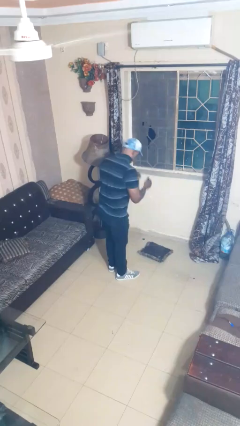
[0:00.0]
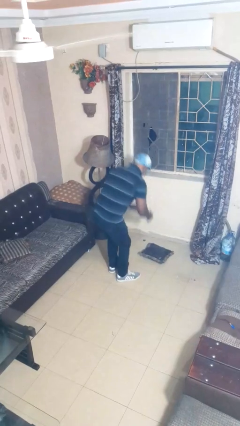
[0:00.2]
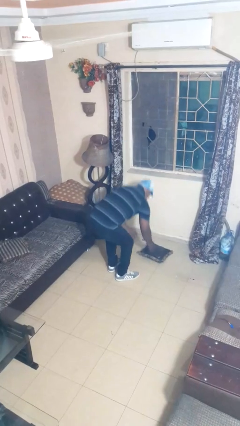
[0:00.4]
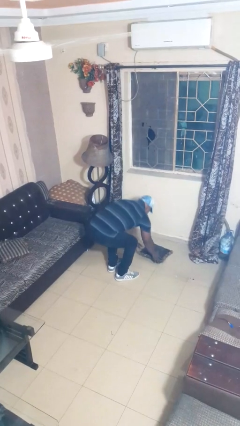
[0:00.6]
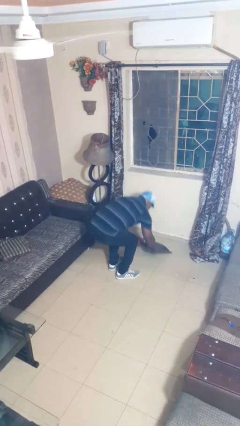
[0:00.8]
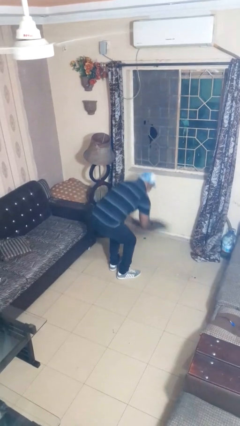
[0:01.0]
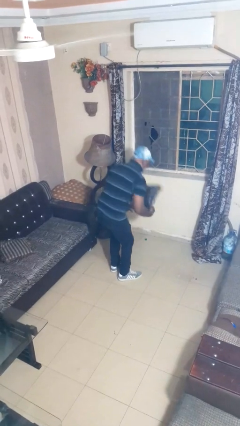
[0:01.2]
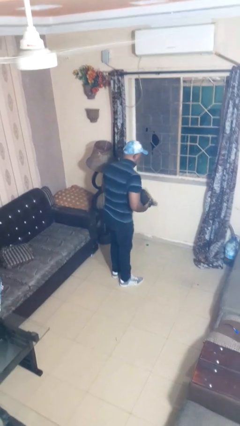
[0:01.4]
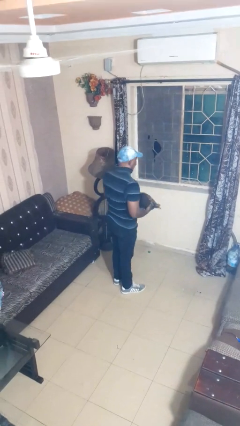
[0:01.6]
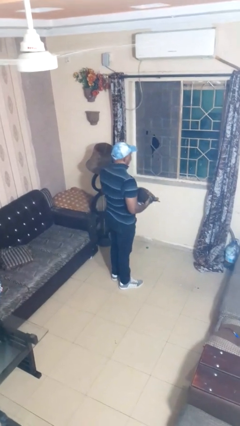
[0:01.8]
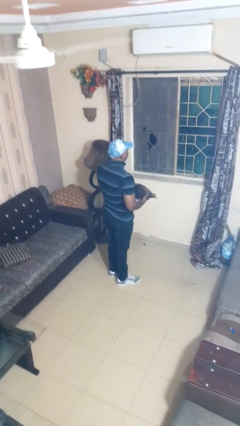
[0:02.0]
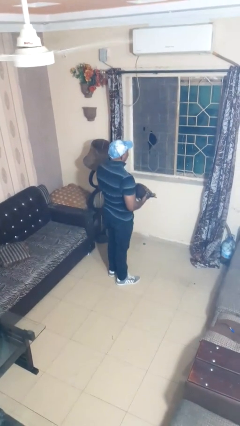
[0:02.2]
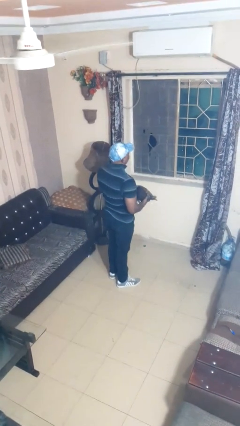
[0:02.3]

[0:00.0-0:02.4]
person picks up object from floor

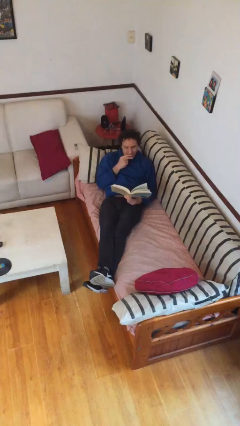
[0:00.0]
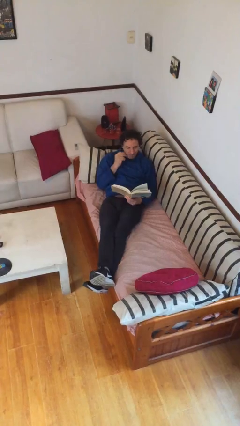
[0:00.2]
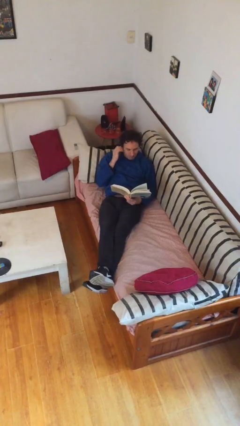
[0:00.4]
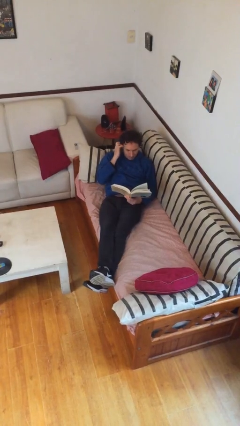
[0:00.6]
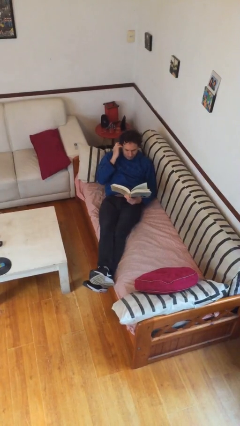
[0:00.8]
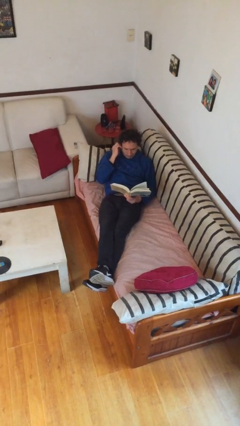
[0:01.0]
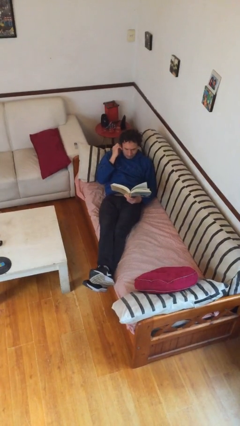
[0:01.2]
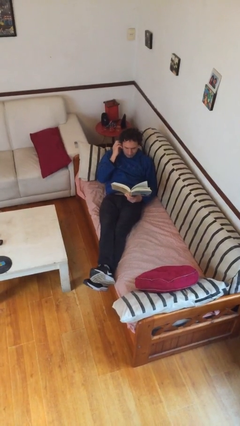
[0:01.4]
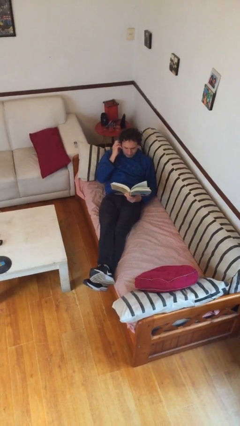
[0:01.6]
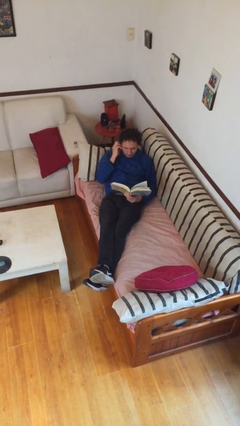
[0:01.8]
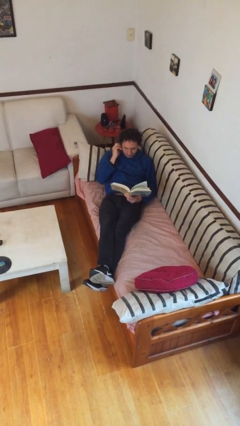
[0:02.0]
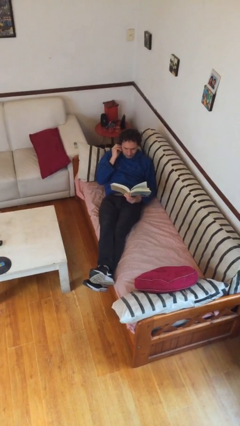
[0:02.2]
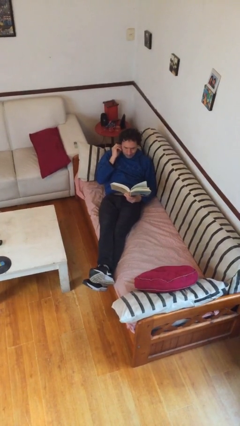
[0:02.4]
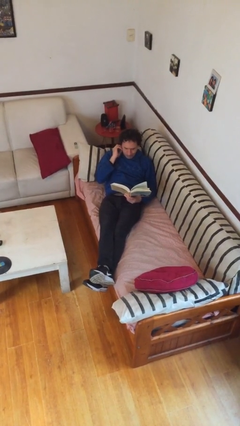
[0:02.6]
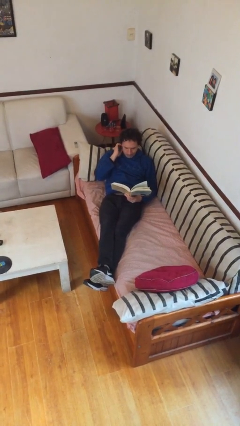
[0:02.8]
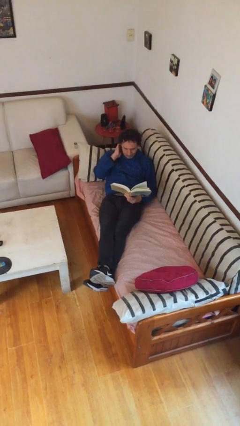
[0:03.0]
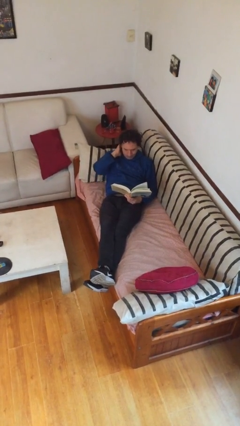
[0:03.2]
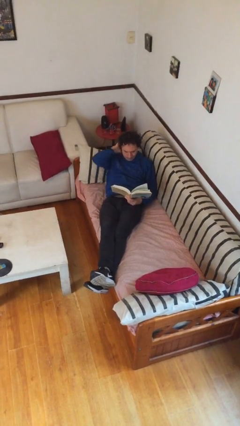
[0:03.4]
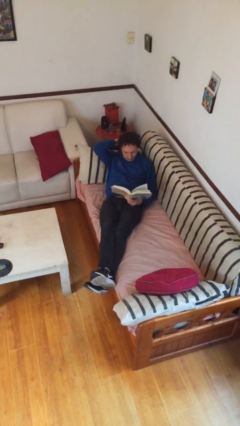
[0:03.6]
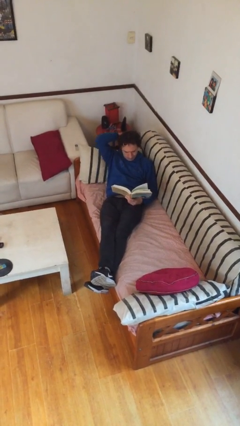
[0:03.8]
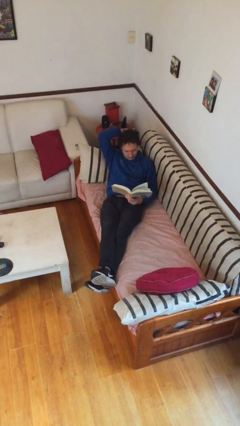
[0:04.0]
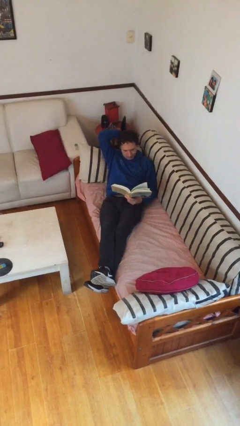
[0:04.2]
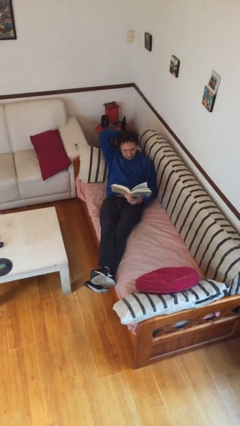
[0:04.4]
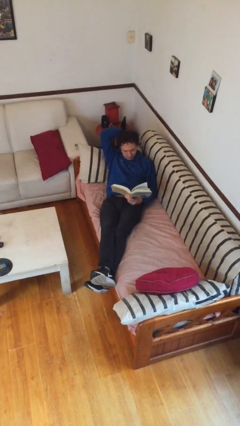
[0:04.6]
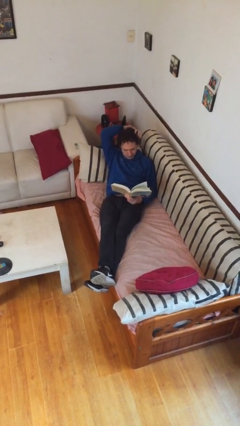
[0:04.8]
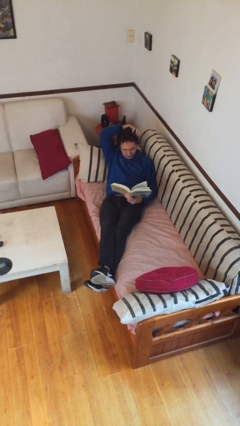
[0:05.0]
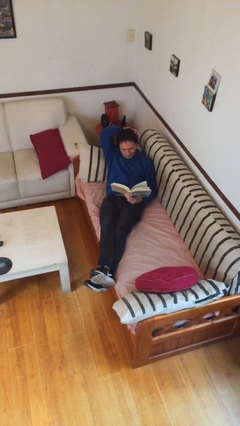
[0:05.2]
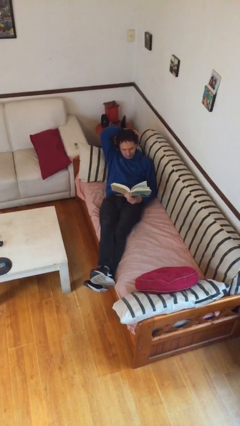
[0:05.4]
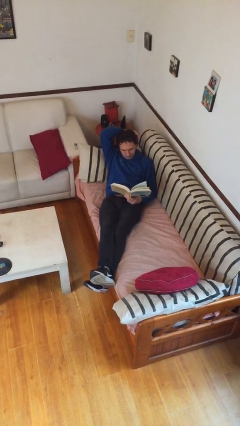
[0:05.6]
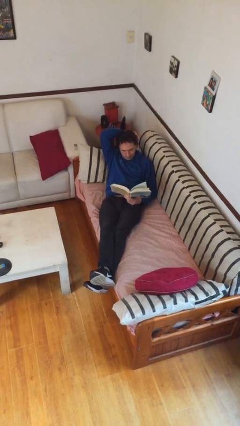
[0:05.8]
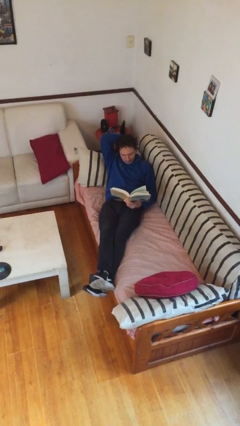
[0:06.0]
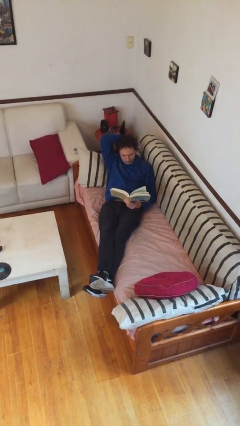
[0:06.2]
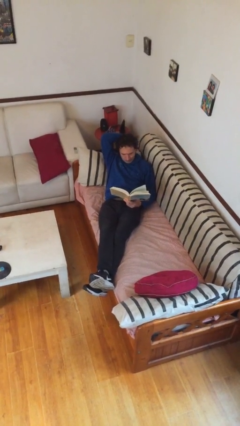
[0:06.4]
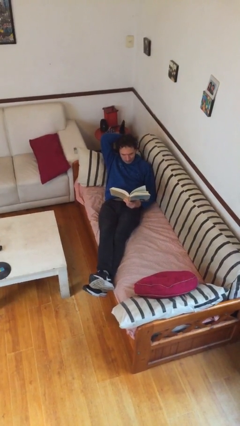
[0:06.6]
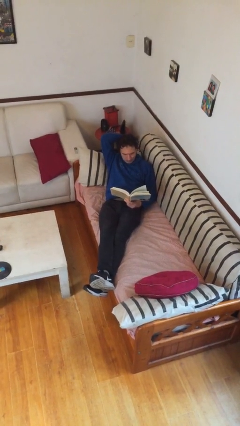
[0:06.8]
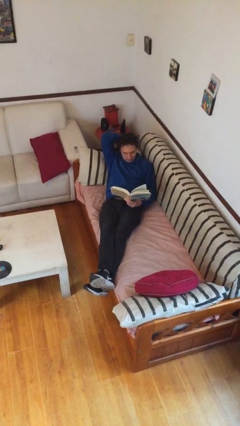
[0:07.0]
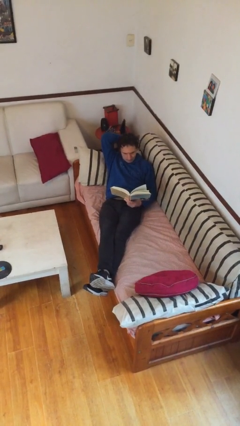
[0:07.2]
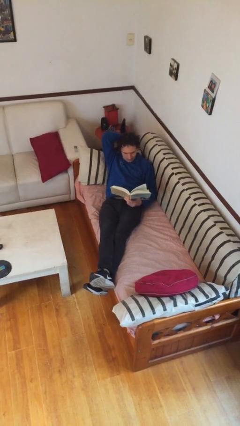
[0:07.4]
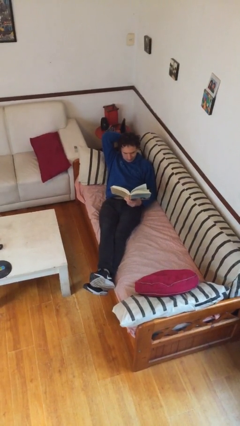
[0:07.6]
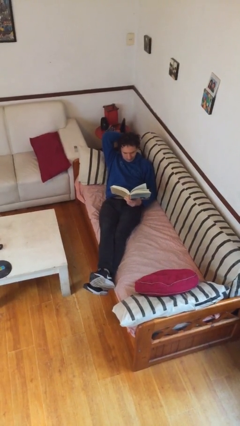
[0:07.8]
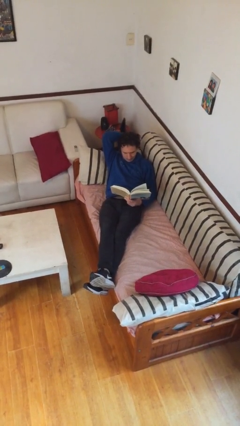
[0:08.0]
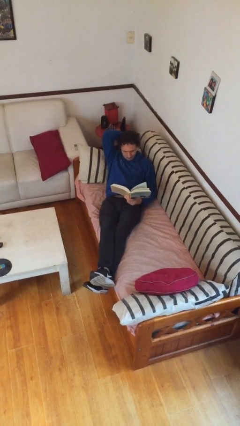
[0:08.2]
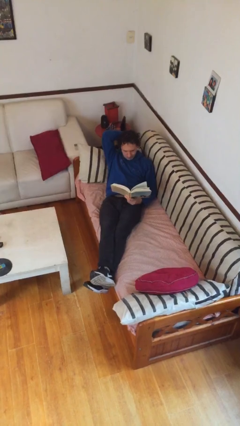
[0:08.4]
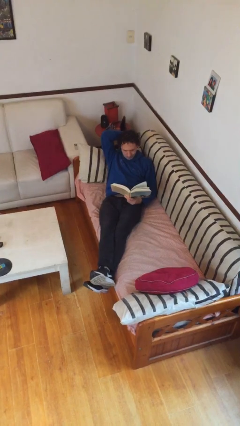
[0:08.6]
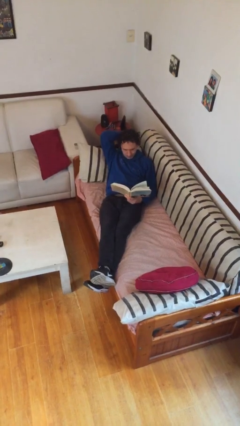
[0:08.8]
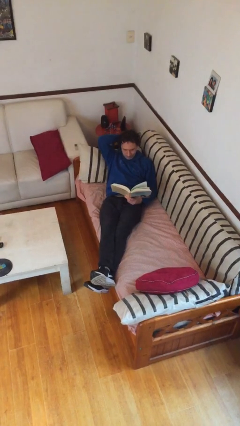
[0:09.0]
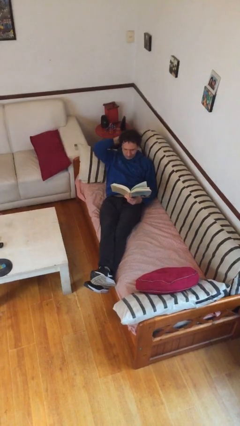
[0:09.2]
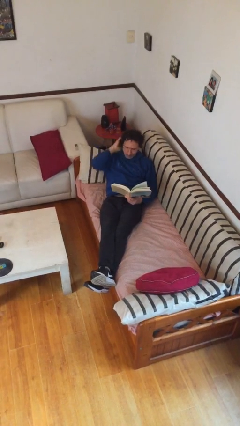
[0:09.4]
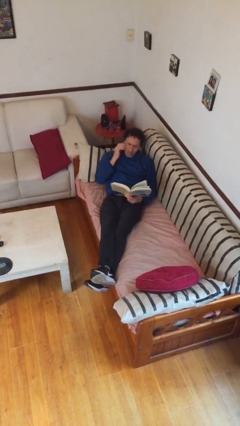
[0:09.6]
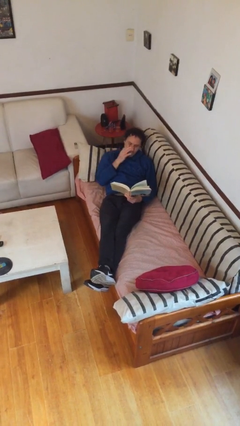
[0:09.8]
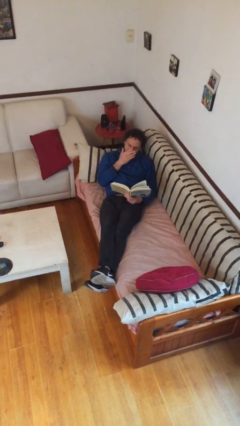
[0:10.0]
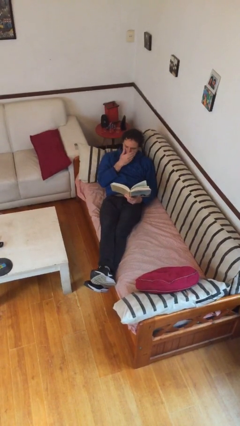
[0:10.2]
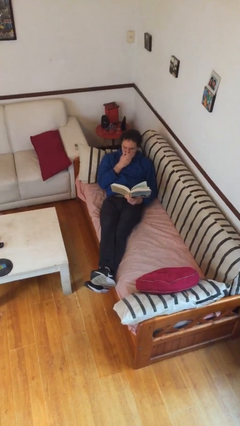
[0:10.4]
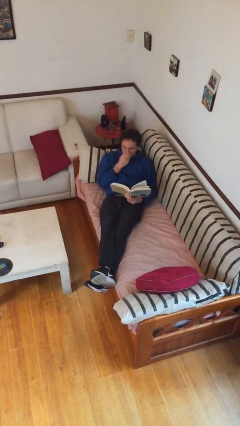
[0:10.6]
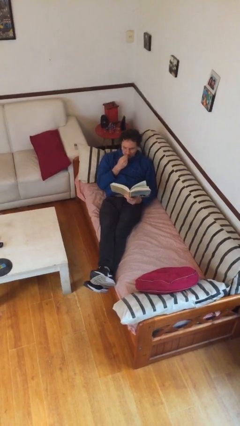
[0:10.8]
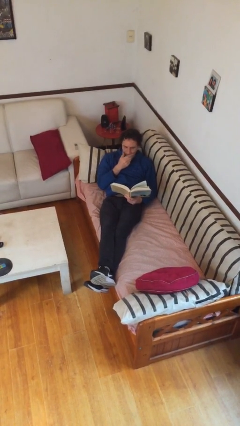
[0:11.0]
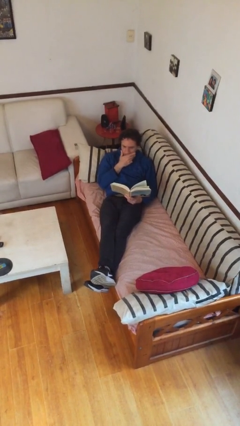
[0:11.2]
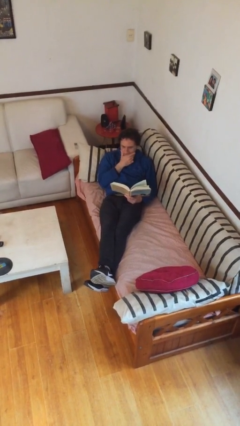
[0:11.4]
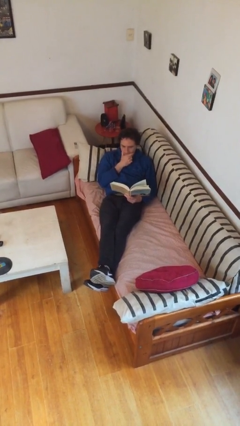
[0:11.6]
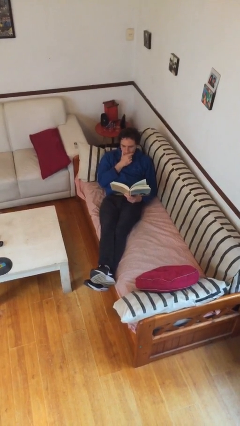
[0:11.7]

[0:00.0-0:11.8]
person reads document

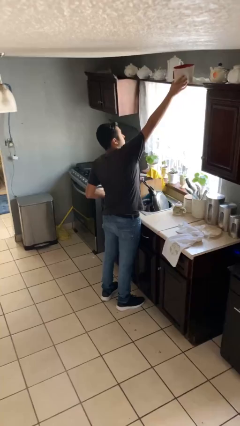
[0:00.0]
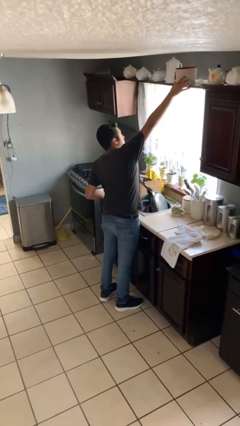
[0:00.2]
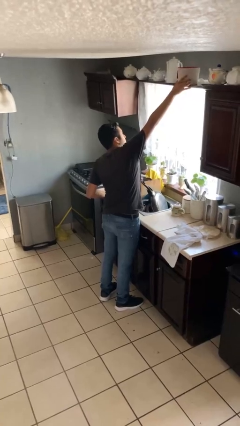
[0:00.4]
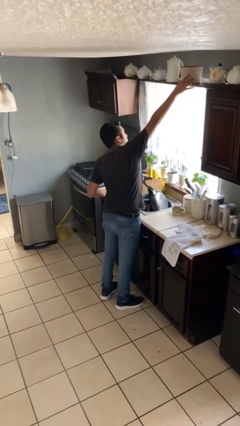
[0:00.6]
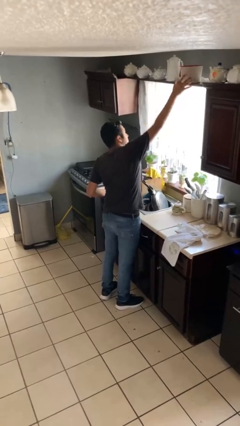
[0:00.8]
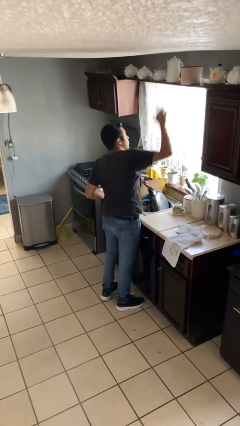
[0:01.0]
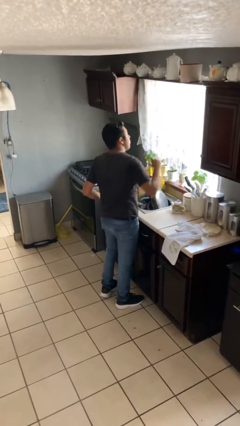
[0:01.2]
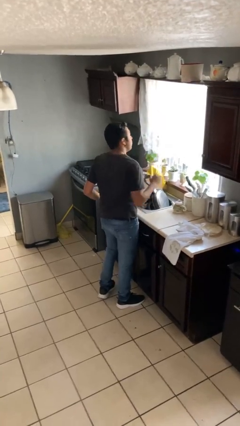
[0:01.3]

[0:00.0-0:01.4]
person puts down object on countertop

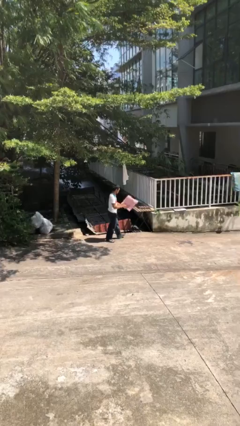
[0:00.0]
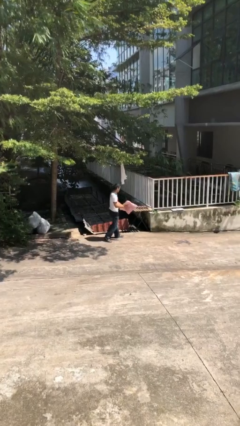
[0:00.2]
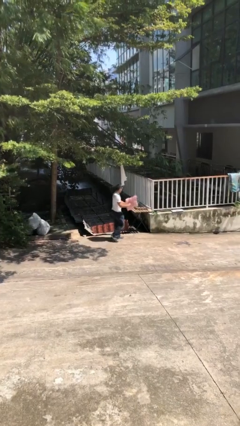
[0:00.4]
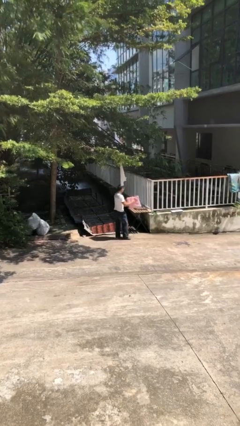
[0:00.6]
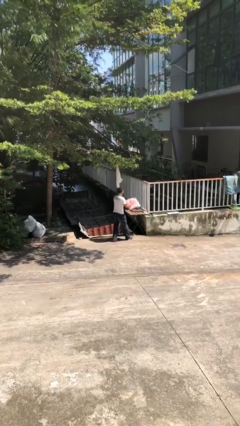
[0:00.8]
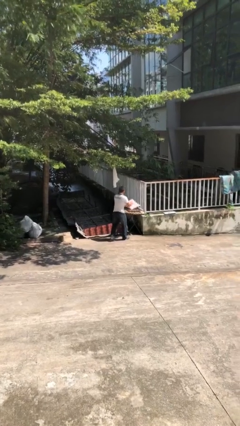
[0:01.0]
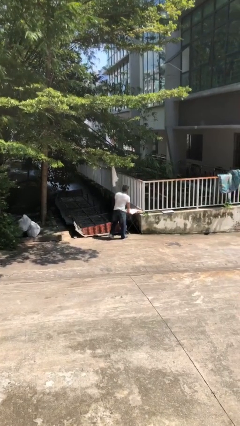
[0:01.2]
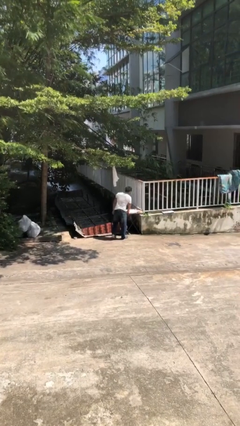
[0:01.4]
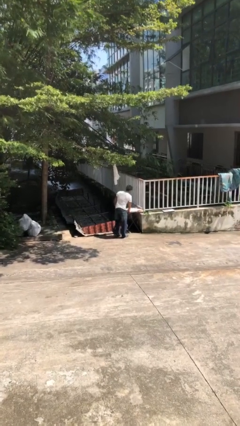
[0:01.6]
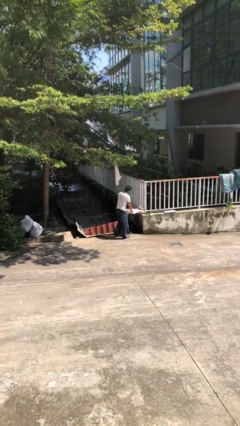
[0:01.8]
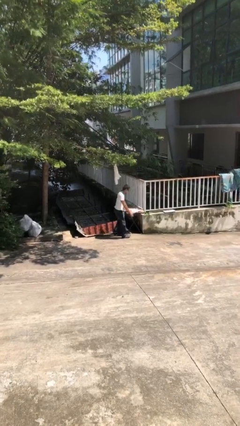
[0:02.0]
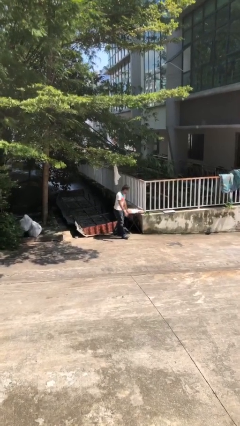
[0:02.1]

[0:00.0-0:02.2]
person puts down object on table
